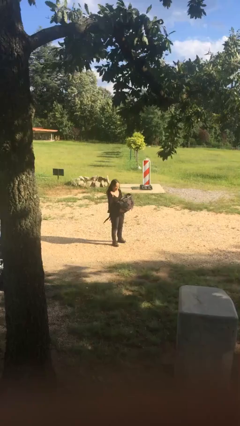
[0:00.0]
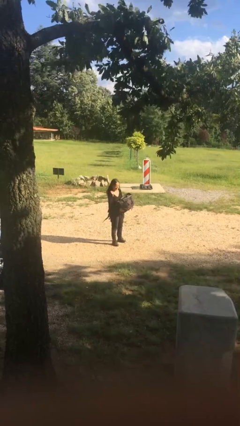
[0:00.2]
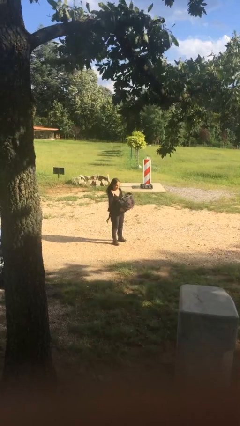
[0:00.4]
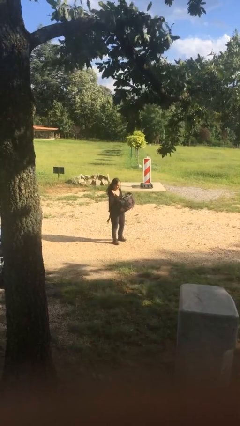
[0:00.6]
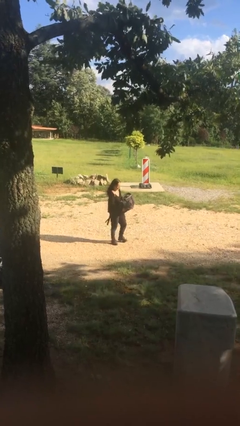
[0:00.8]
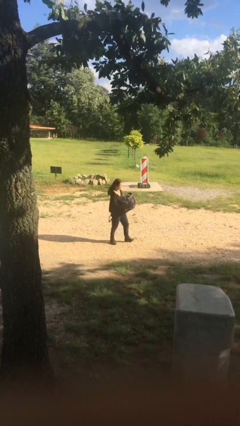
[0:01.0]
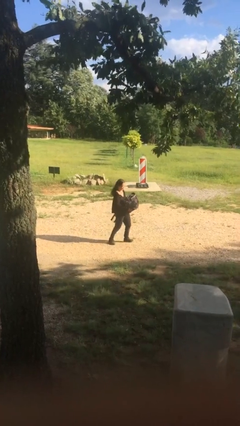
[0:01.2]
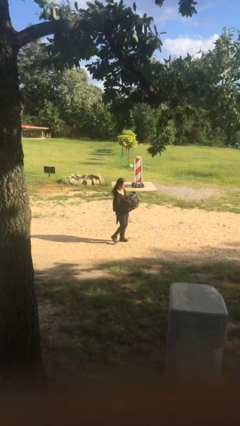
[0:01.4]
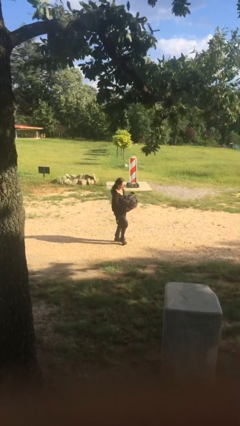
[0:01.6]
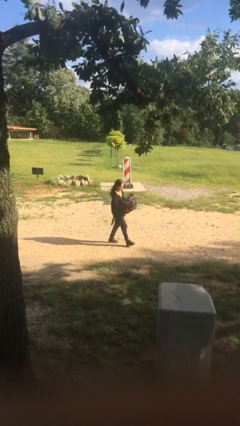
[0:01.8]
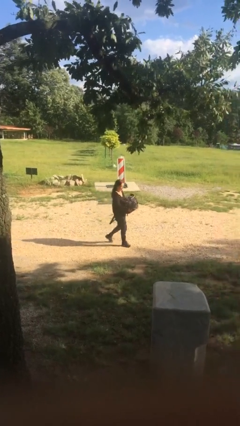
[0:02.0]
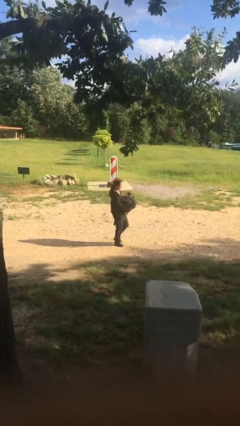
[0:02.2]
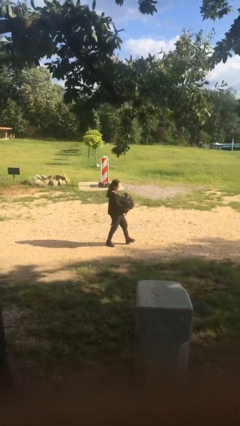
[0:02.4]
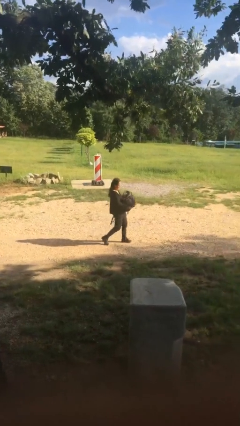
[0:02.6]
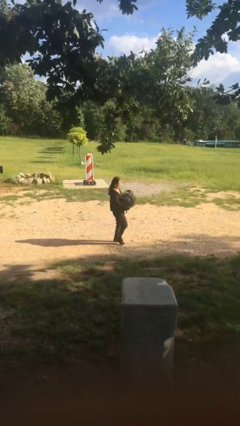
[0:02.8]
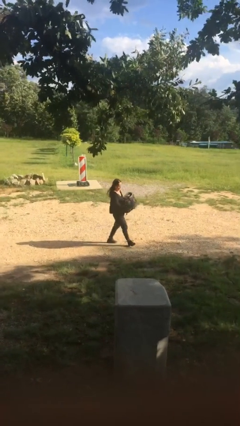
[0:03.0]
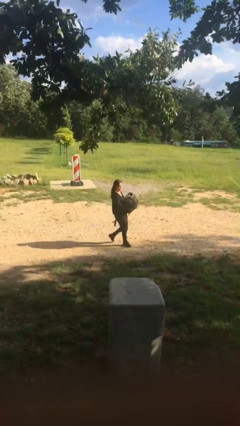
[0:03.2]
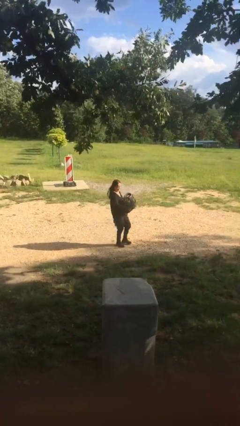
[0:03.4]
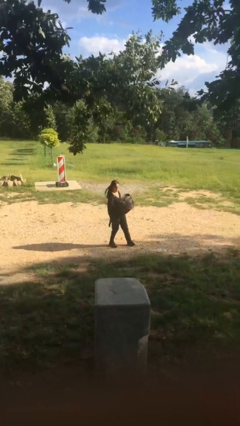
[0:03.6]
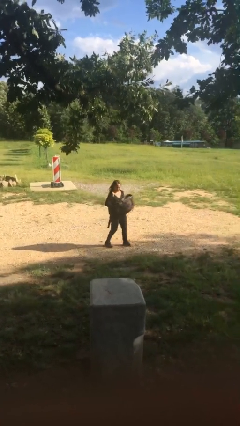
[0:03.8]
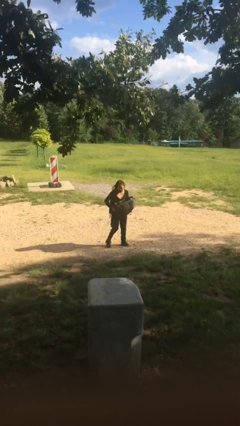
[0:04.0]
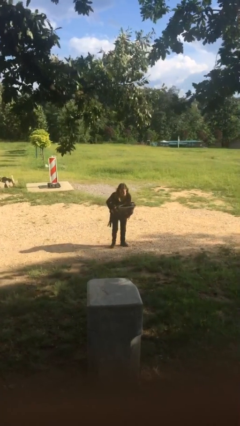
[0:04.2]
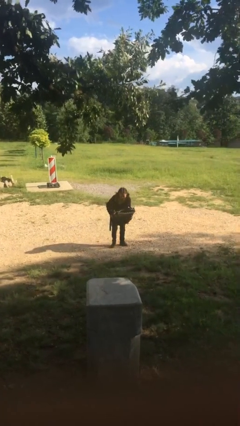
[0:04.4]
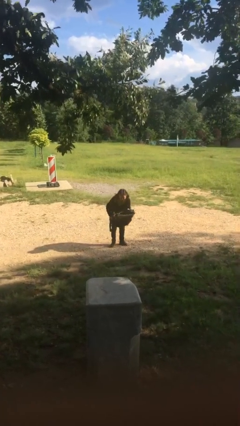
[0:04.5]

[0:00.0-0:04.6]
person carries heavy object

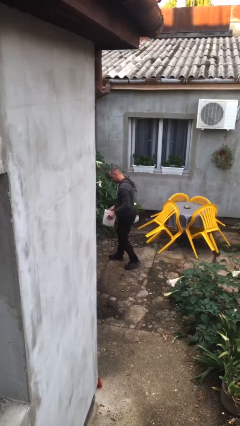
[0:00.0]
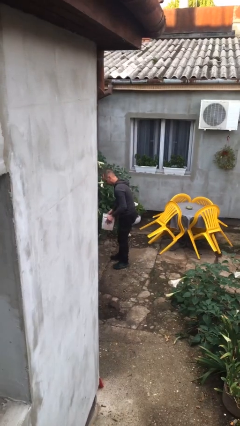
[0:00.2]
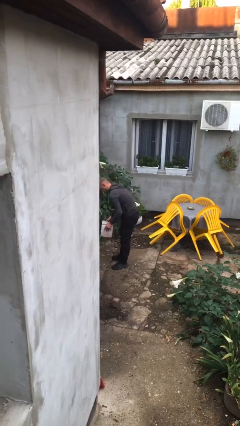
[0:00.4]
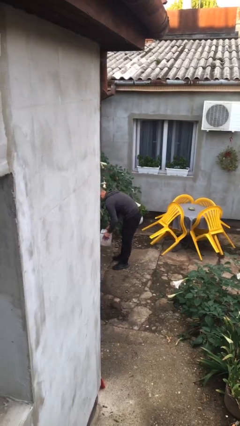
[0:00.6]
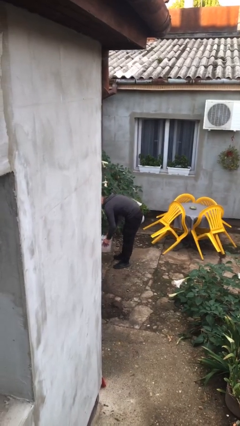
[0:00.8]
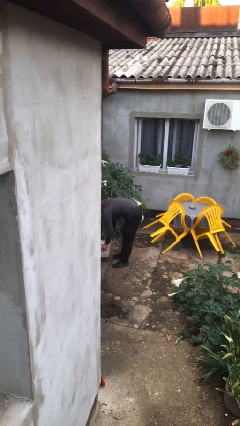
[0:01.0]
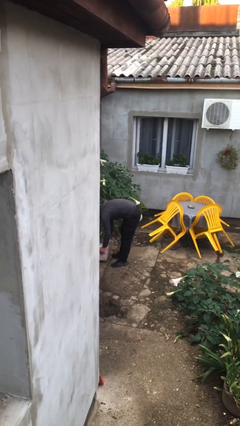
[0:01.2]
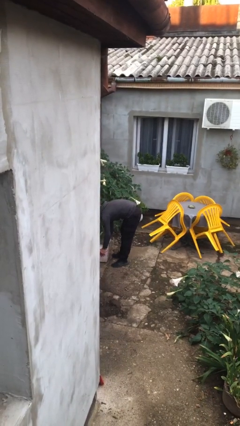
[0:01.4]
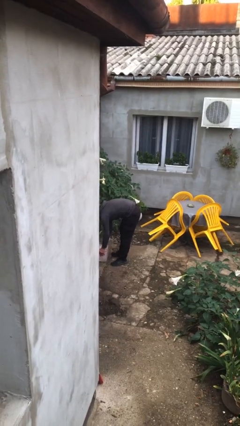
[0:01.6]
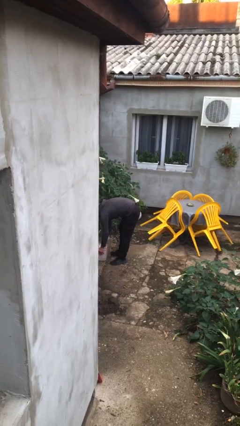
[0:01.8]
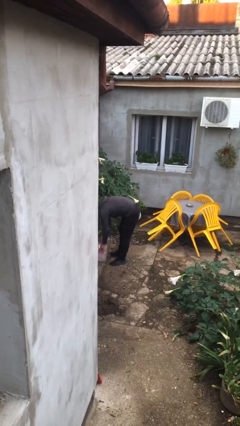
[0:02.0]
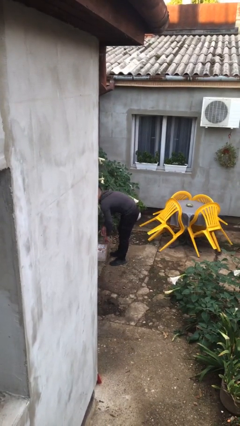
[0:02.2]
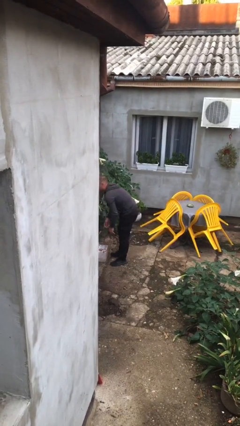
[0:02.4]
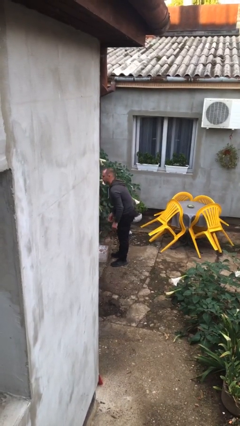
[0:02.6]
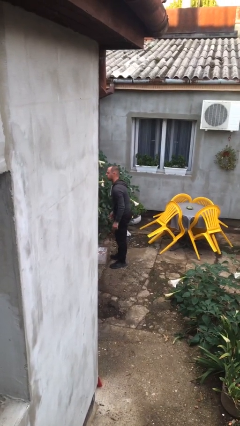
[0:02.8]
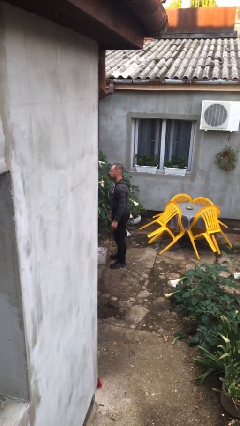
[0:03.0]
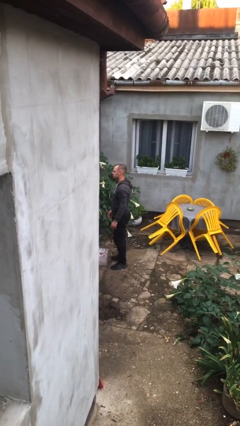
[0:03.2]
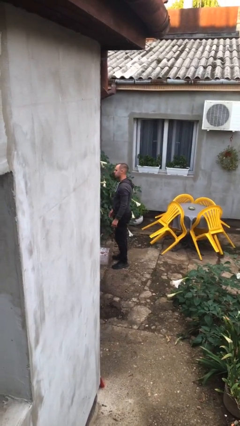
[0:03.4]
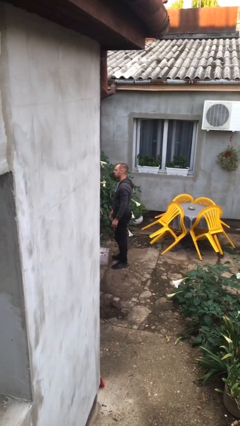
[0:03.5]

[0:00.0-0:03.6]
person puts down object on floor

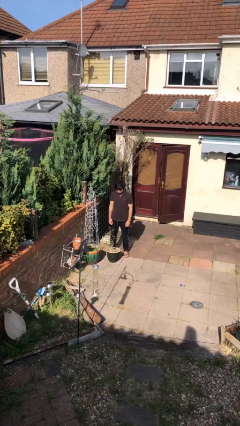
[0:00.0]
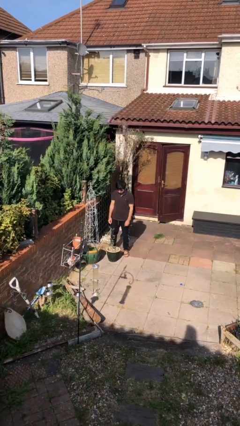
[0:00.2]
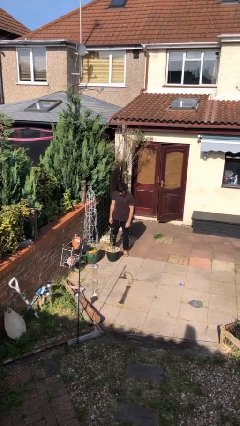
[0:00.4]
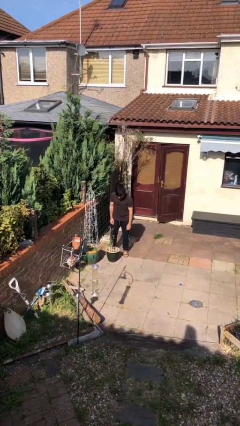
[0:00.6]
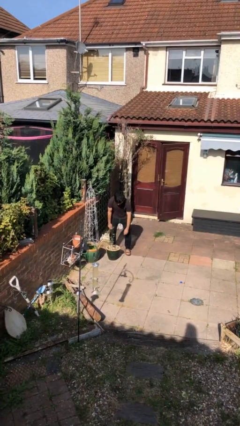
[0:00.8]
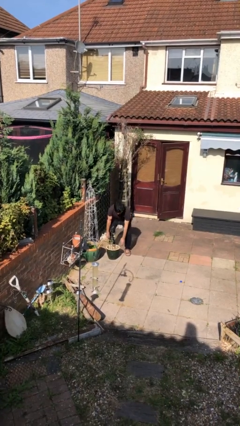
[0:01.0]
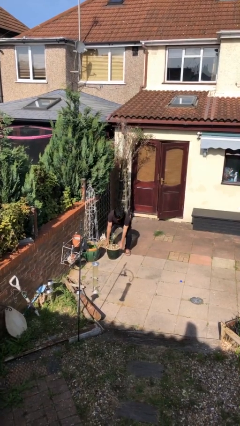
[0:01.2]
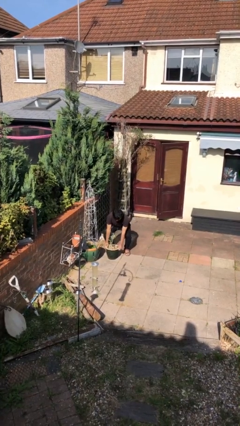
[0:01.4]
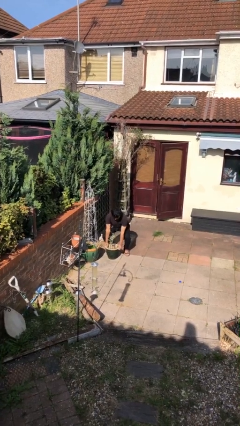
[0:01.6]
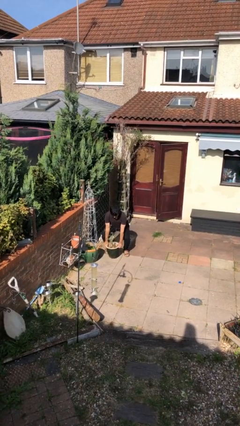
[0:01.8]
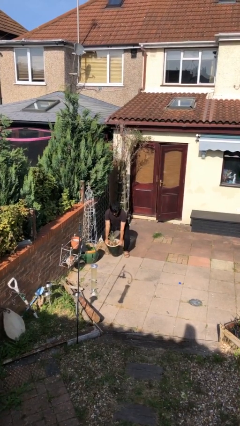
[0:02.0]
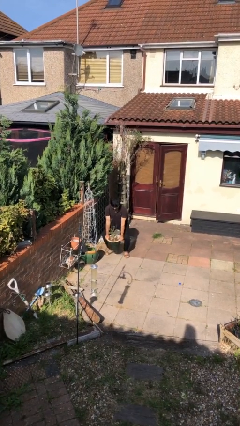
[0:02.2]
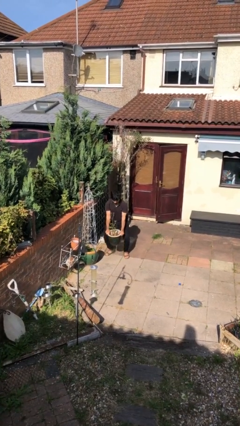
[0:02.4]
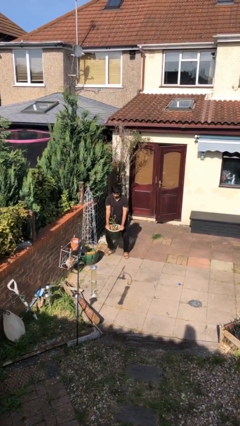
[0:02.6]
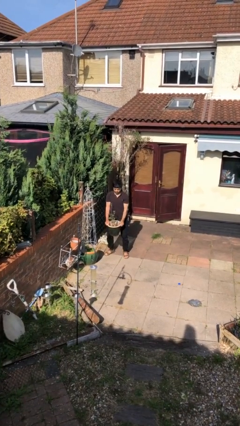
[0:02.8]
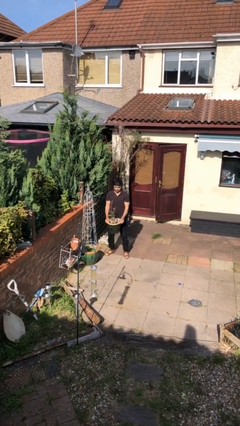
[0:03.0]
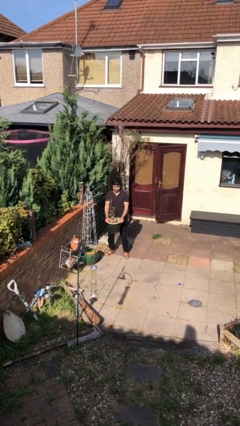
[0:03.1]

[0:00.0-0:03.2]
person picks up object from floor

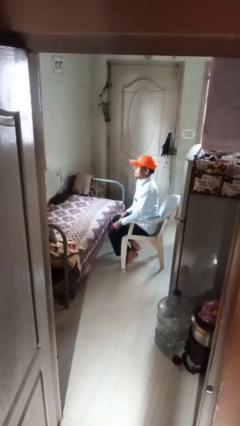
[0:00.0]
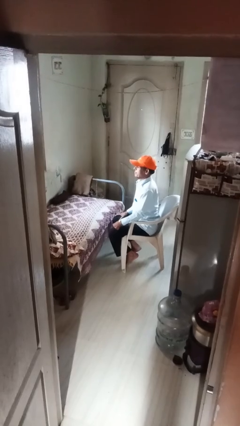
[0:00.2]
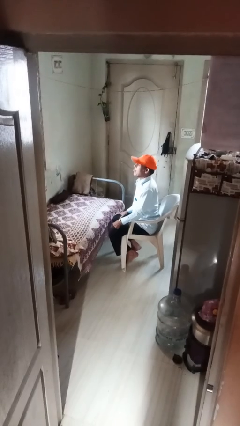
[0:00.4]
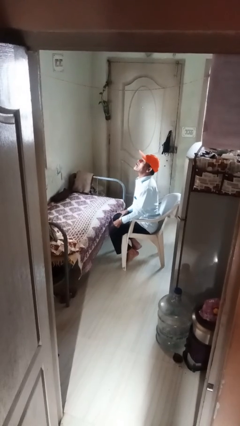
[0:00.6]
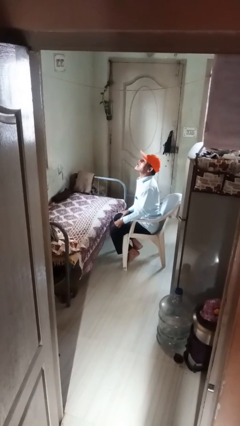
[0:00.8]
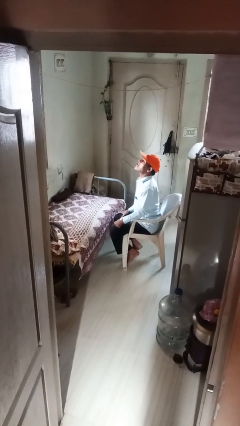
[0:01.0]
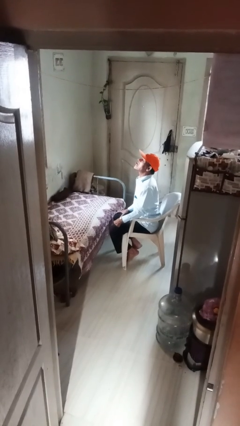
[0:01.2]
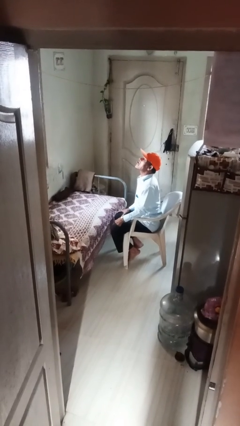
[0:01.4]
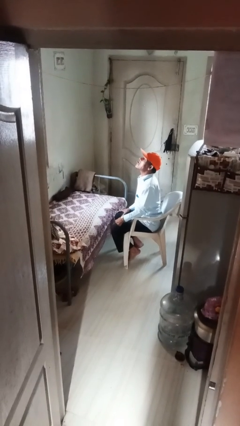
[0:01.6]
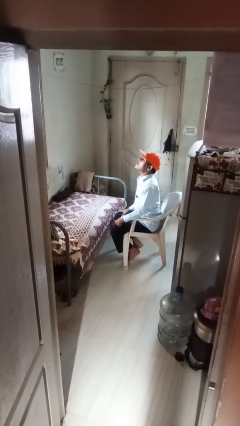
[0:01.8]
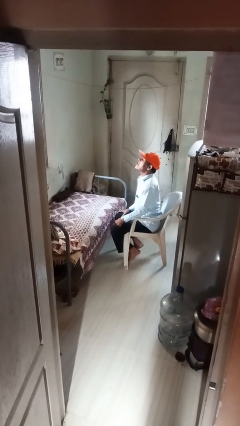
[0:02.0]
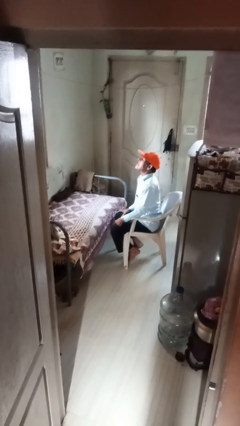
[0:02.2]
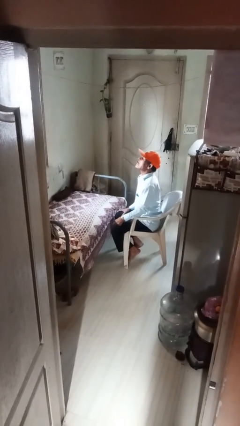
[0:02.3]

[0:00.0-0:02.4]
person sticks out tongue

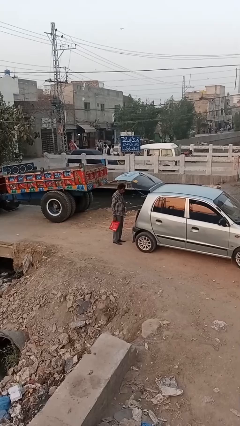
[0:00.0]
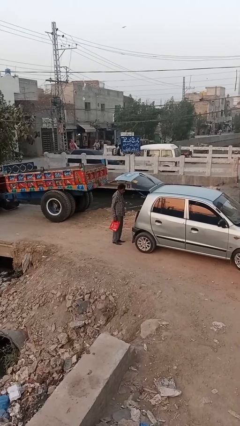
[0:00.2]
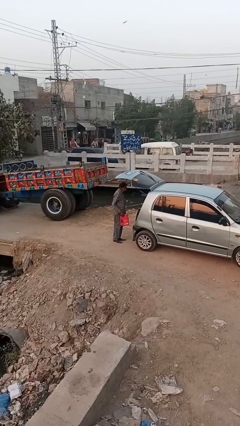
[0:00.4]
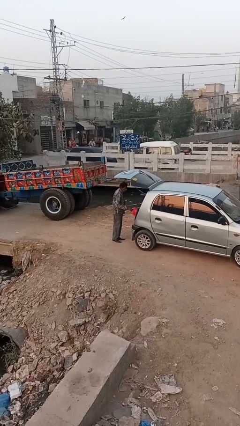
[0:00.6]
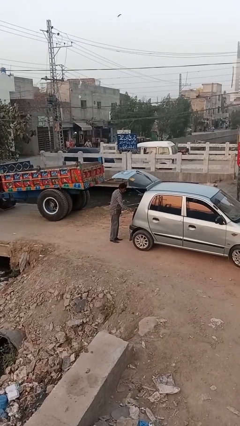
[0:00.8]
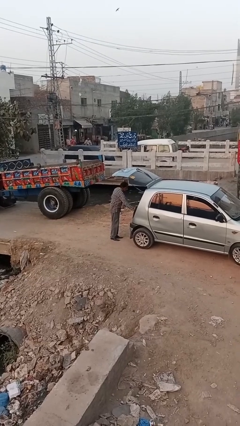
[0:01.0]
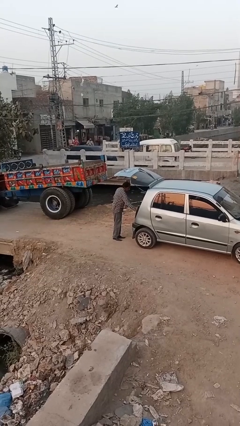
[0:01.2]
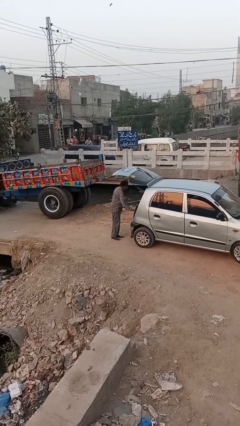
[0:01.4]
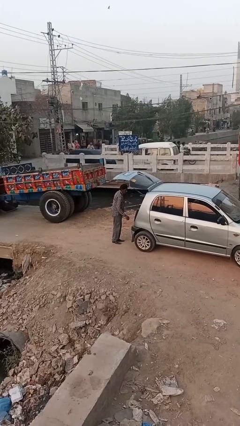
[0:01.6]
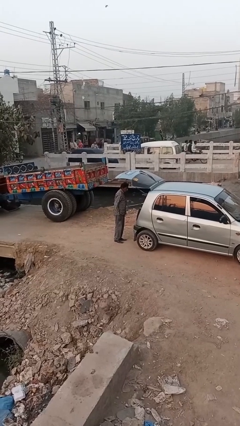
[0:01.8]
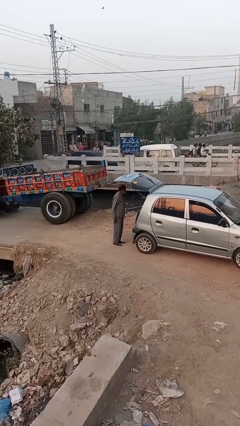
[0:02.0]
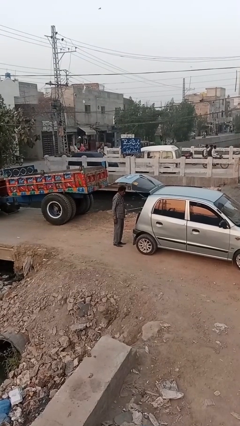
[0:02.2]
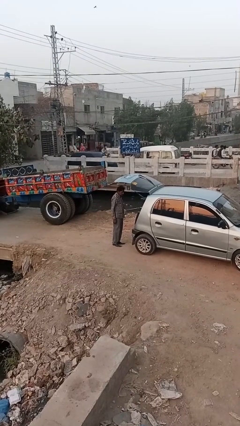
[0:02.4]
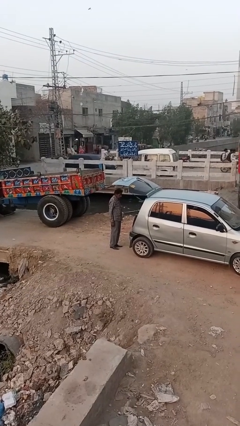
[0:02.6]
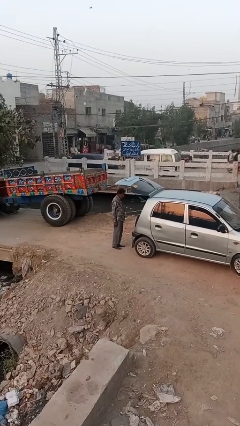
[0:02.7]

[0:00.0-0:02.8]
person loads car

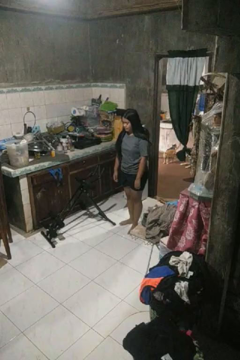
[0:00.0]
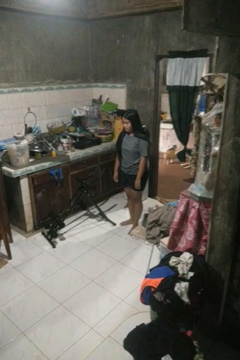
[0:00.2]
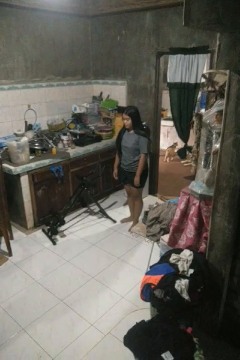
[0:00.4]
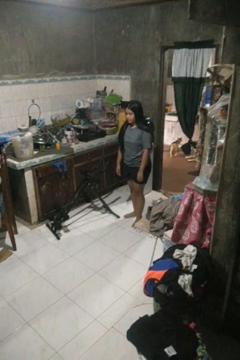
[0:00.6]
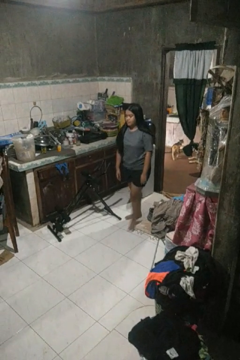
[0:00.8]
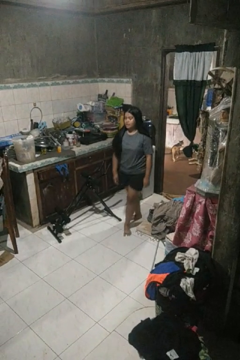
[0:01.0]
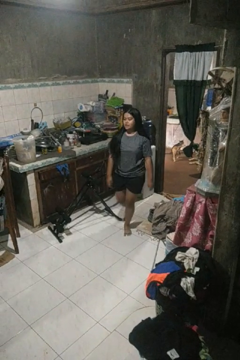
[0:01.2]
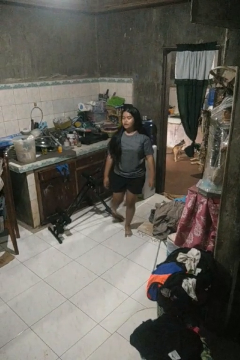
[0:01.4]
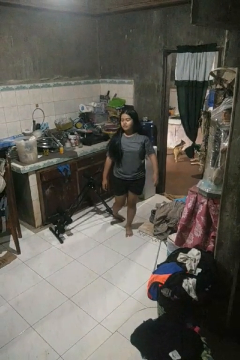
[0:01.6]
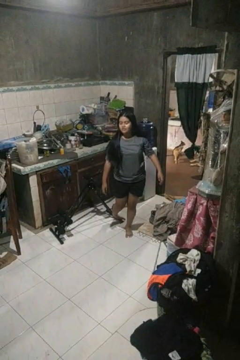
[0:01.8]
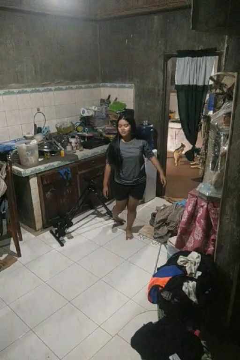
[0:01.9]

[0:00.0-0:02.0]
person trips on object on floor
